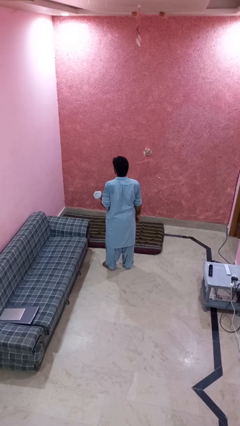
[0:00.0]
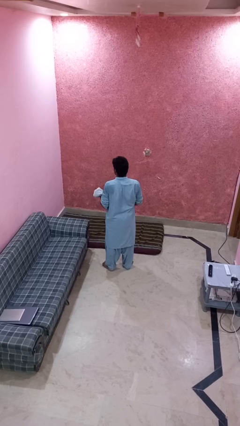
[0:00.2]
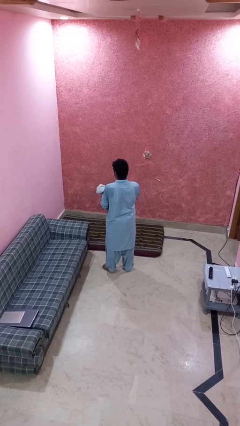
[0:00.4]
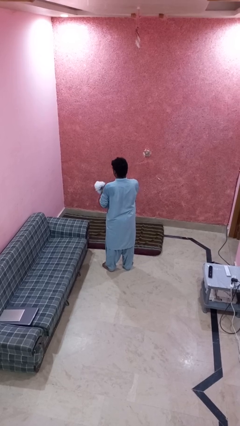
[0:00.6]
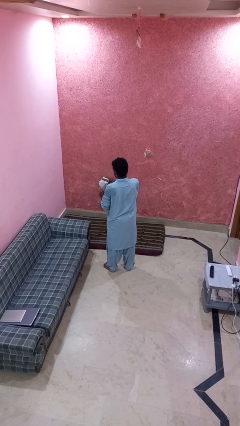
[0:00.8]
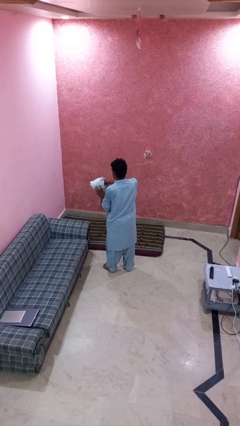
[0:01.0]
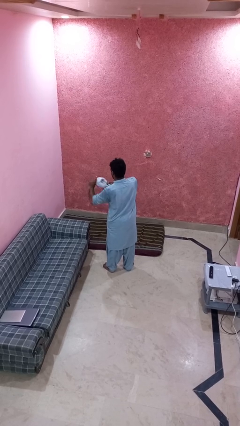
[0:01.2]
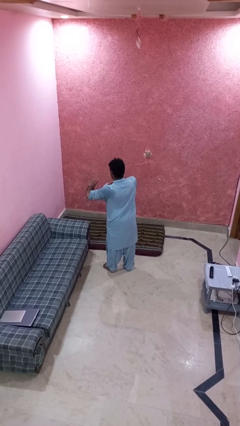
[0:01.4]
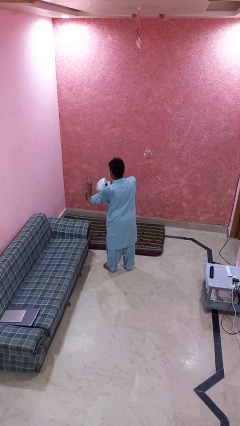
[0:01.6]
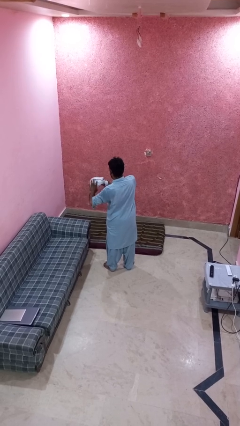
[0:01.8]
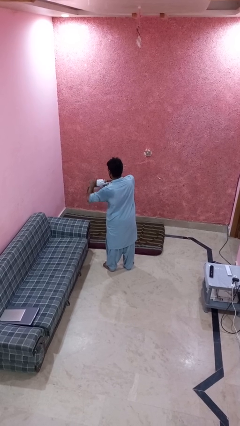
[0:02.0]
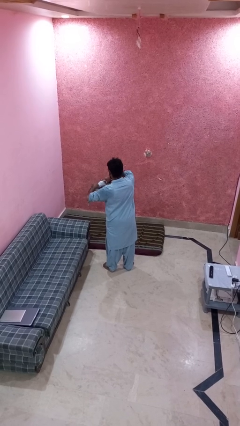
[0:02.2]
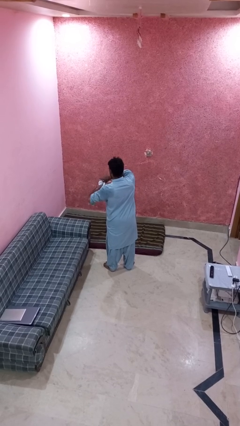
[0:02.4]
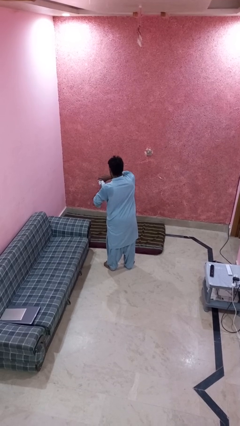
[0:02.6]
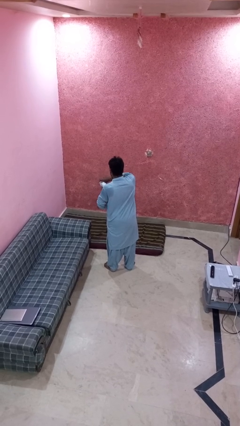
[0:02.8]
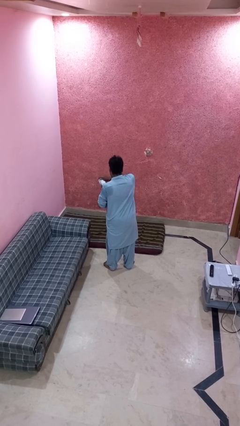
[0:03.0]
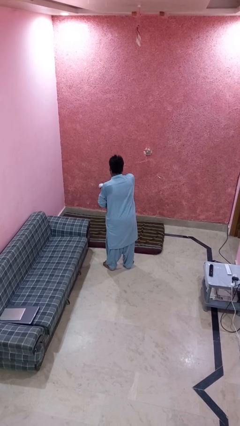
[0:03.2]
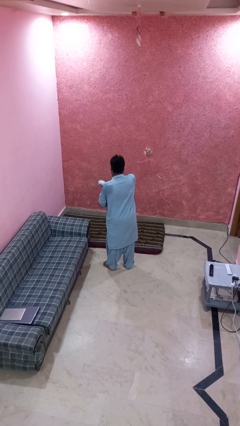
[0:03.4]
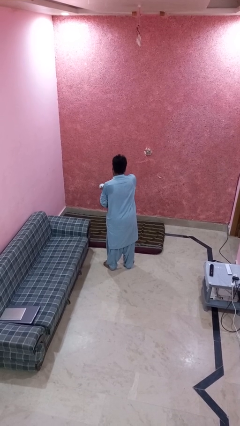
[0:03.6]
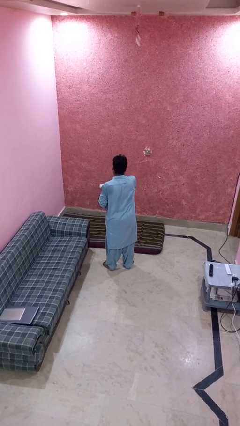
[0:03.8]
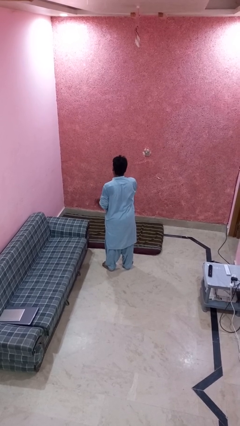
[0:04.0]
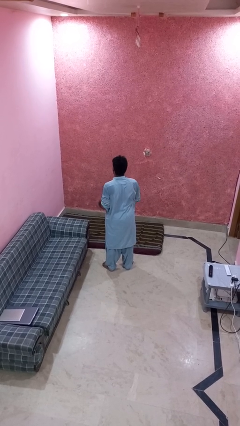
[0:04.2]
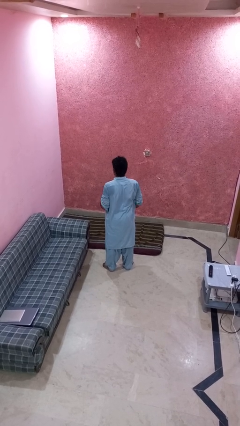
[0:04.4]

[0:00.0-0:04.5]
person squeezes object

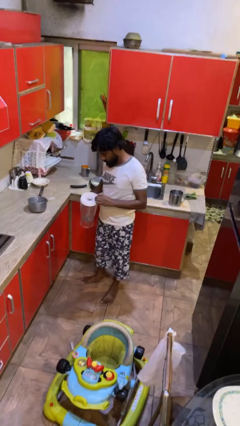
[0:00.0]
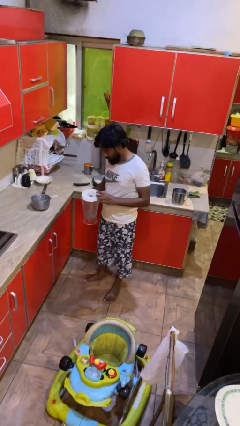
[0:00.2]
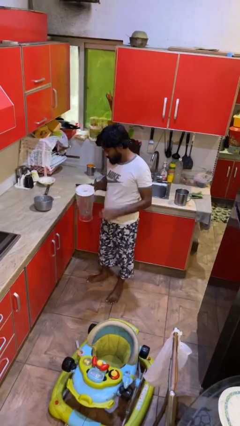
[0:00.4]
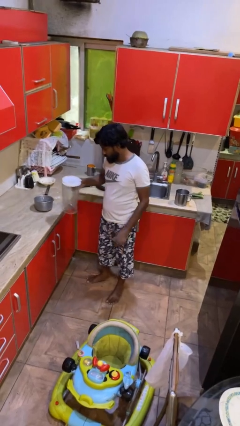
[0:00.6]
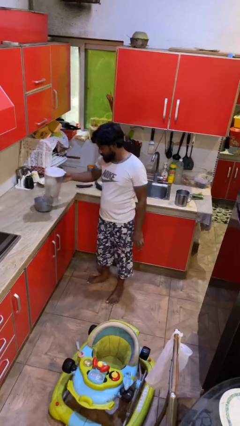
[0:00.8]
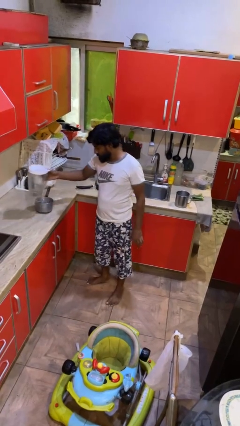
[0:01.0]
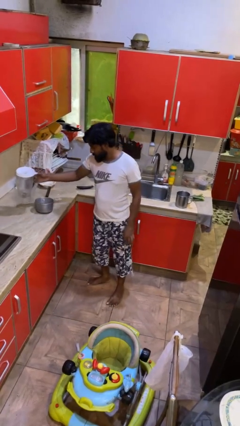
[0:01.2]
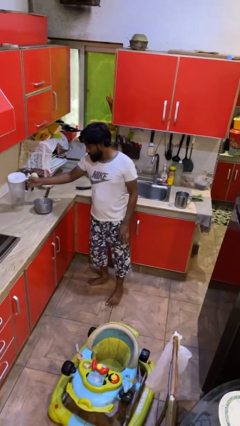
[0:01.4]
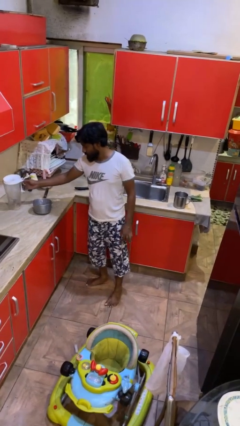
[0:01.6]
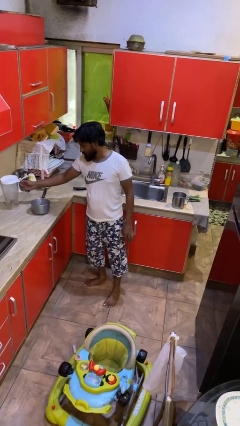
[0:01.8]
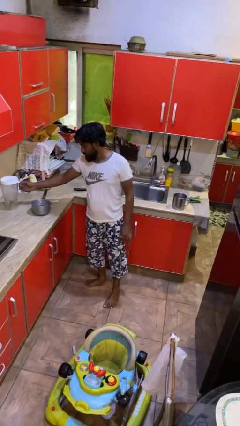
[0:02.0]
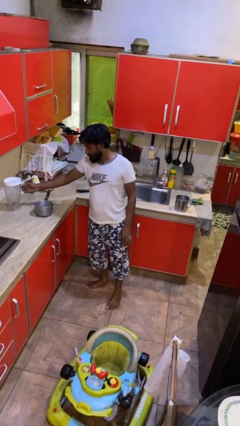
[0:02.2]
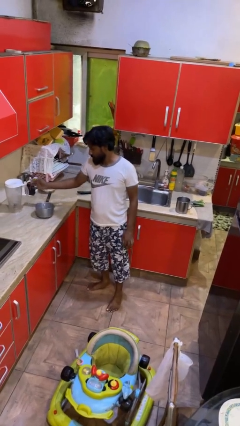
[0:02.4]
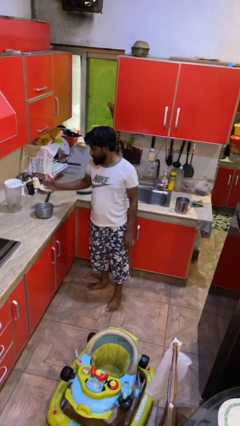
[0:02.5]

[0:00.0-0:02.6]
person puts down object on countertop

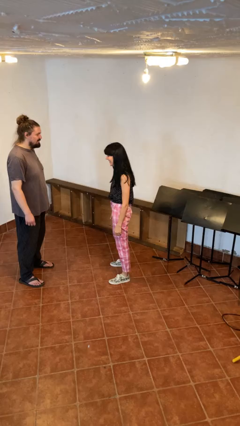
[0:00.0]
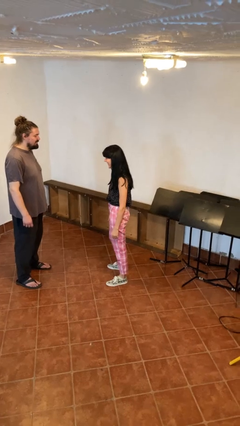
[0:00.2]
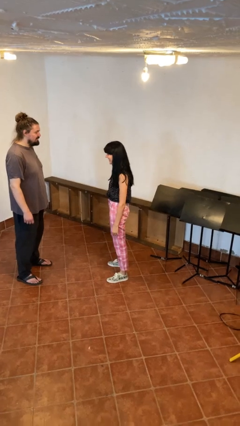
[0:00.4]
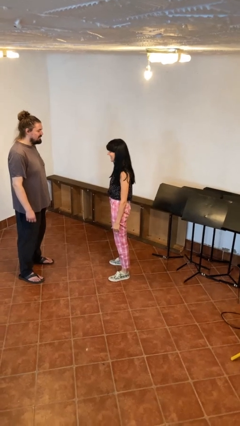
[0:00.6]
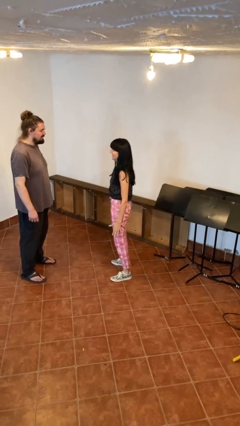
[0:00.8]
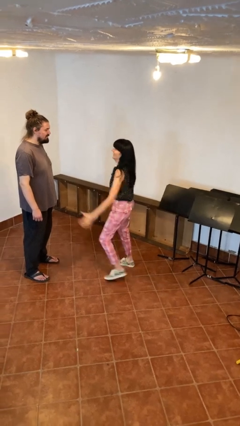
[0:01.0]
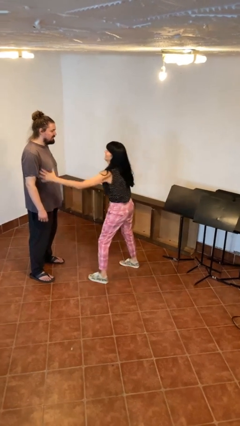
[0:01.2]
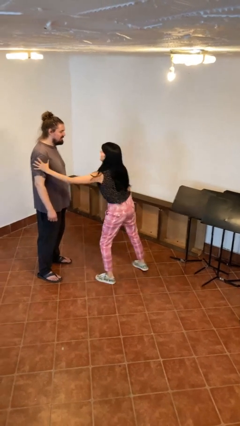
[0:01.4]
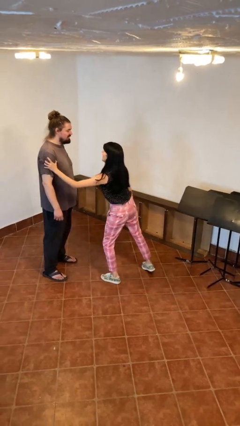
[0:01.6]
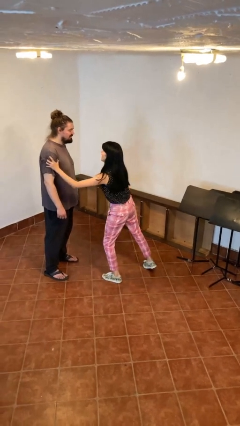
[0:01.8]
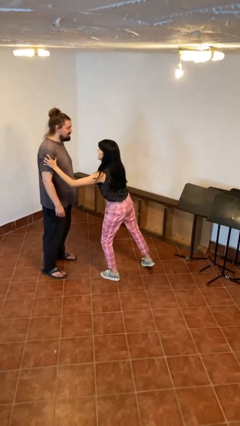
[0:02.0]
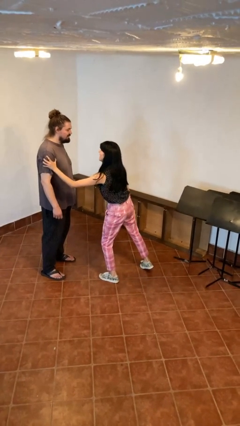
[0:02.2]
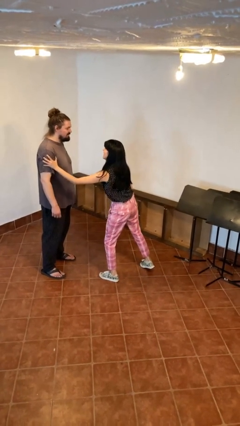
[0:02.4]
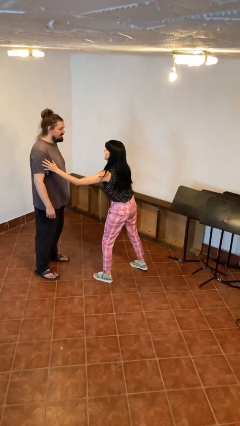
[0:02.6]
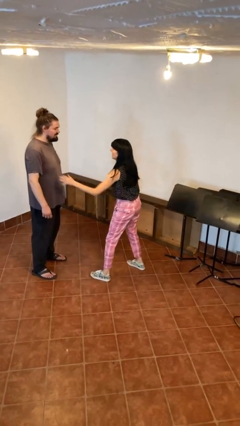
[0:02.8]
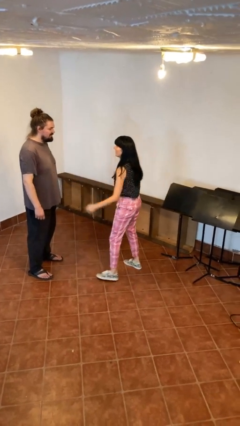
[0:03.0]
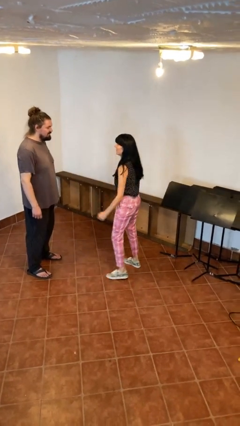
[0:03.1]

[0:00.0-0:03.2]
person grabs person by bicep

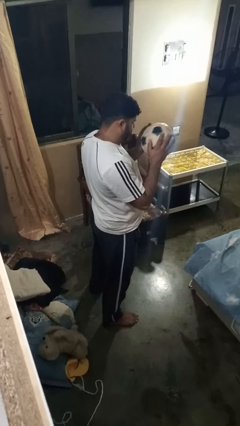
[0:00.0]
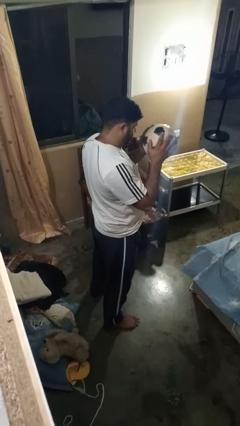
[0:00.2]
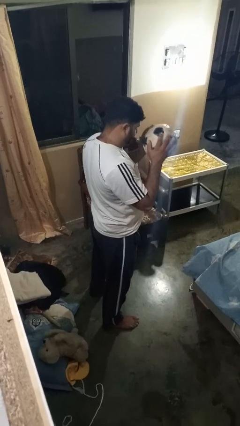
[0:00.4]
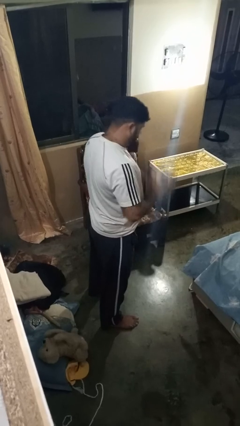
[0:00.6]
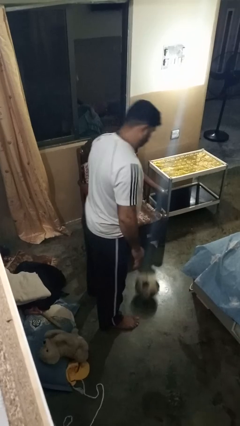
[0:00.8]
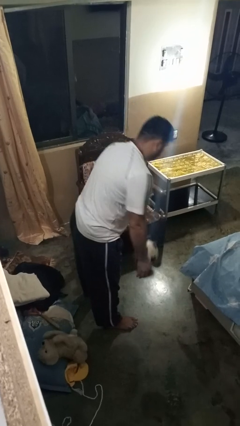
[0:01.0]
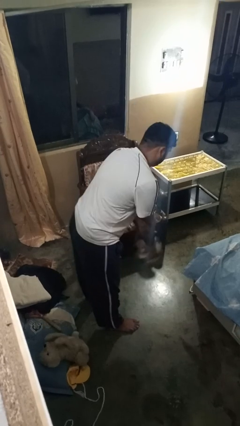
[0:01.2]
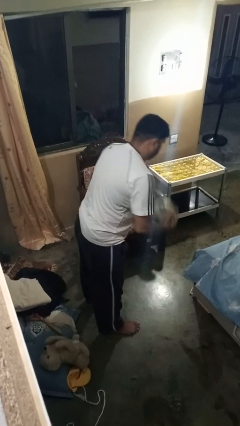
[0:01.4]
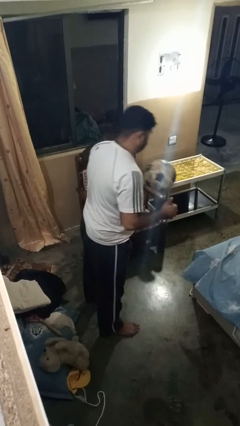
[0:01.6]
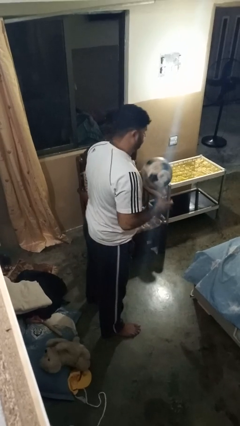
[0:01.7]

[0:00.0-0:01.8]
person bounces ball on floor

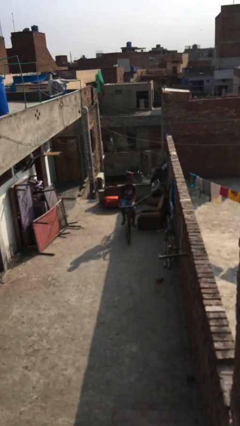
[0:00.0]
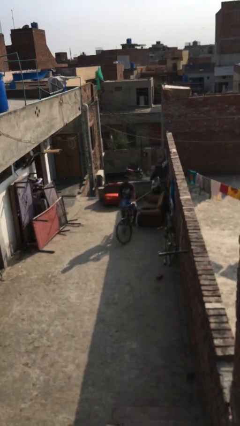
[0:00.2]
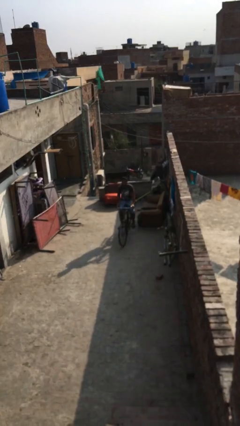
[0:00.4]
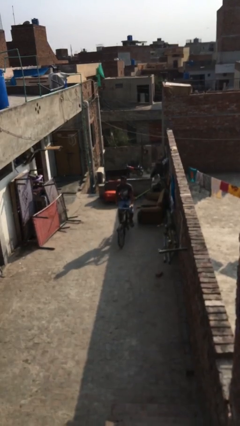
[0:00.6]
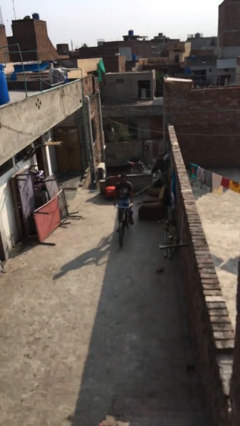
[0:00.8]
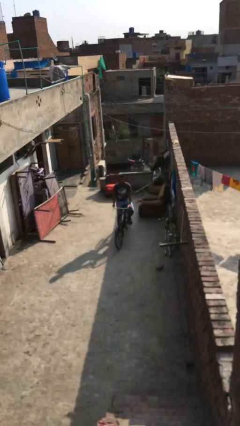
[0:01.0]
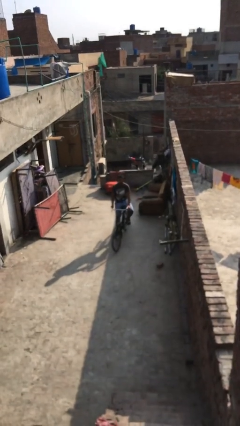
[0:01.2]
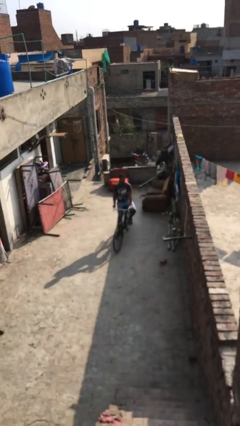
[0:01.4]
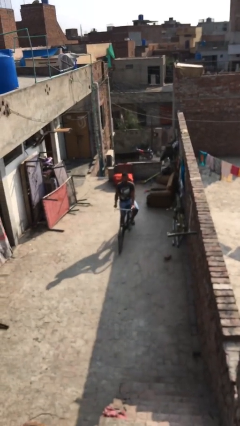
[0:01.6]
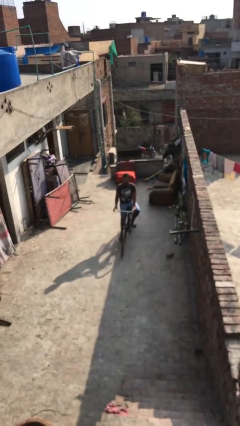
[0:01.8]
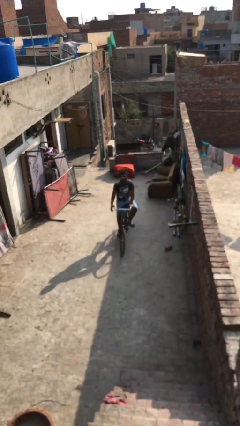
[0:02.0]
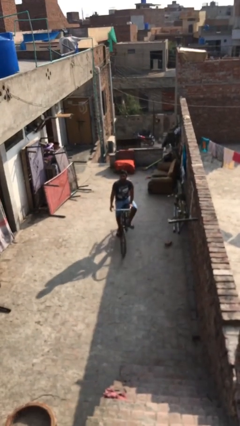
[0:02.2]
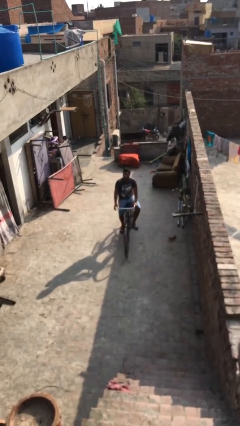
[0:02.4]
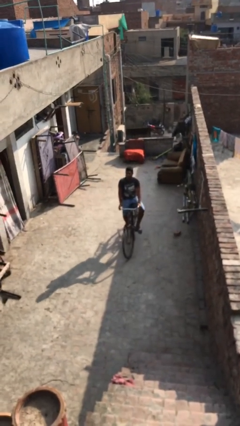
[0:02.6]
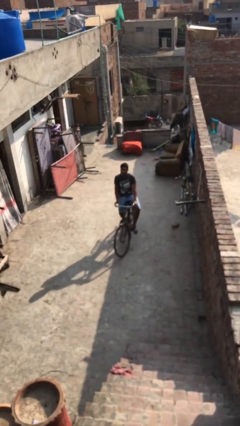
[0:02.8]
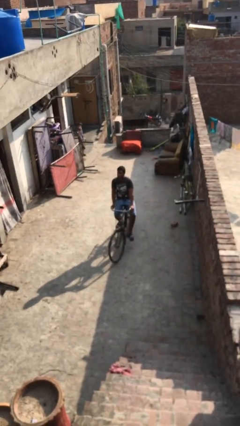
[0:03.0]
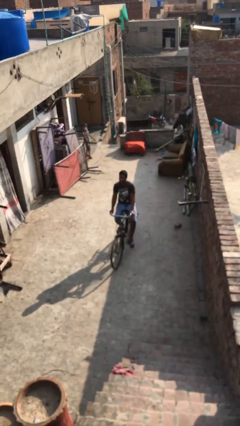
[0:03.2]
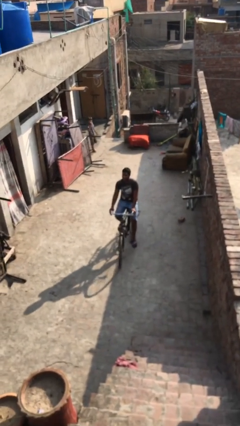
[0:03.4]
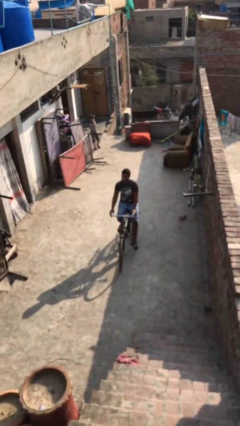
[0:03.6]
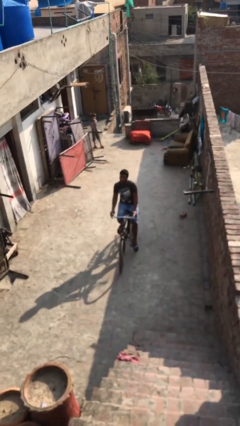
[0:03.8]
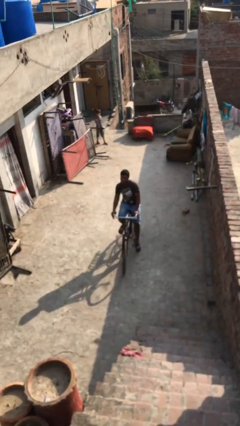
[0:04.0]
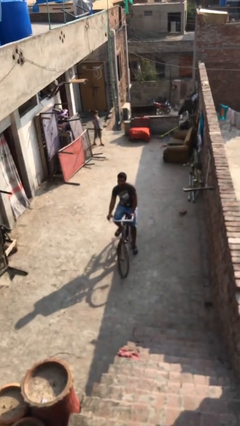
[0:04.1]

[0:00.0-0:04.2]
person rides bicycle

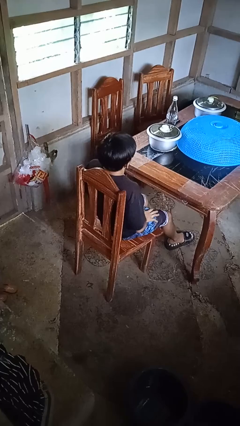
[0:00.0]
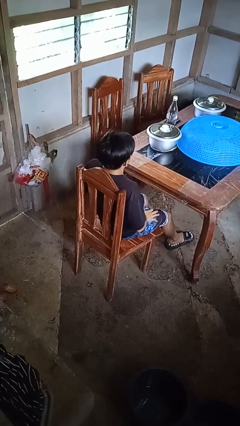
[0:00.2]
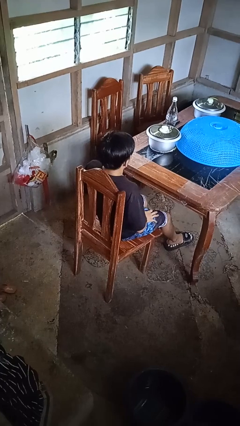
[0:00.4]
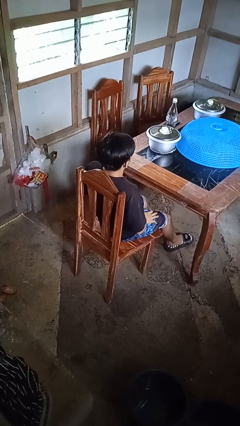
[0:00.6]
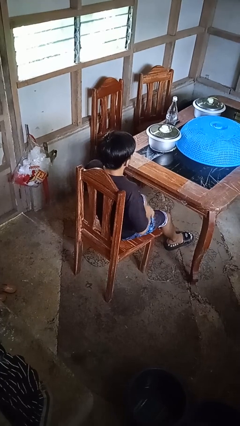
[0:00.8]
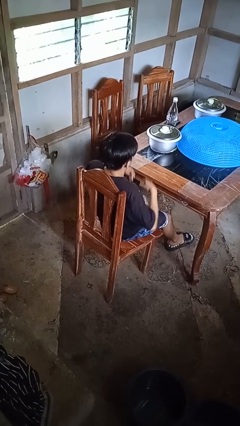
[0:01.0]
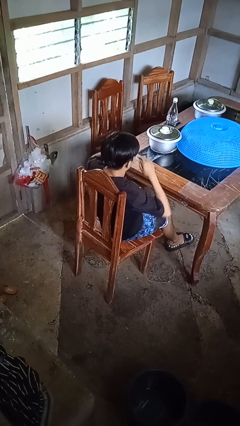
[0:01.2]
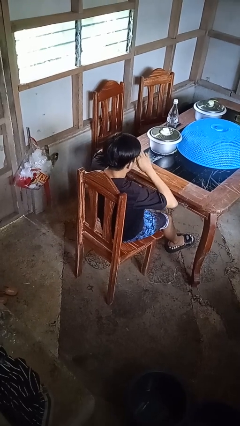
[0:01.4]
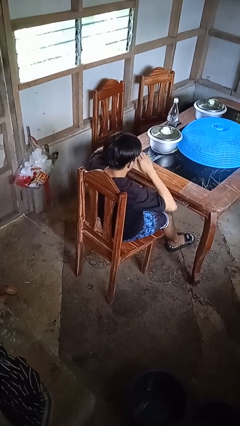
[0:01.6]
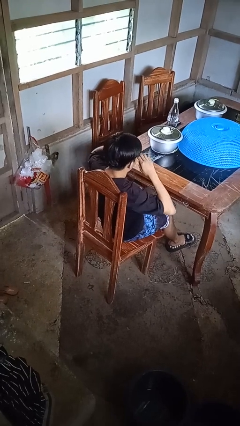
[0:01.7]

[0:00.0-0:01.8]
person rubs eyes
